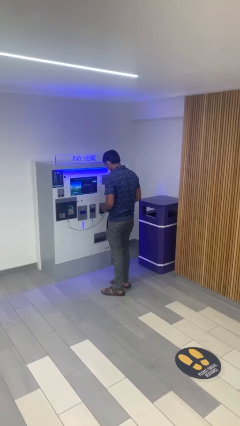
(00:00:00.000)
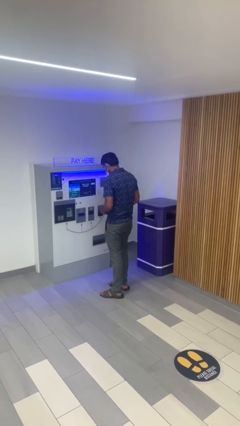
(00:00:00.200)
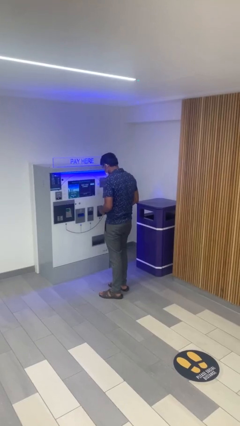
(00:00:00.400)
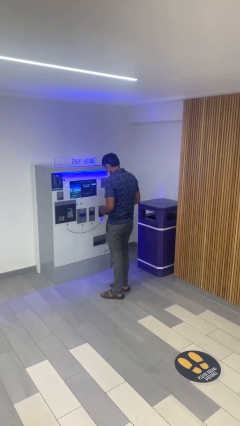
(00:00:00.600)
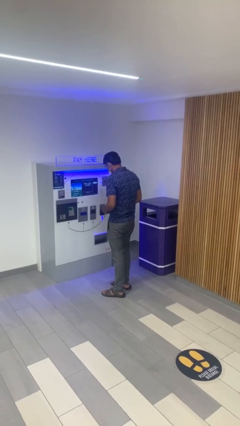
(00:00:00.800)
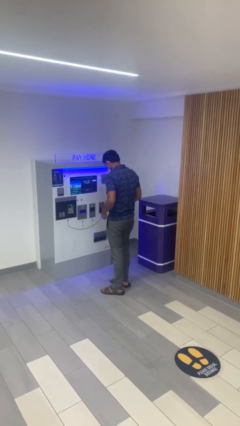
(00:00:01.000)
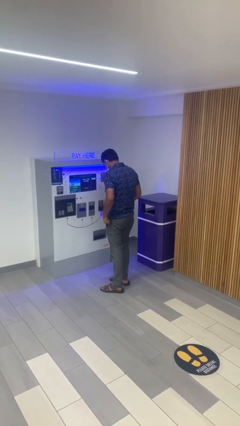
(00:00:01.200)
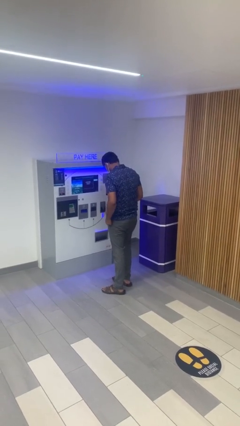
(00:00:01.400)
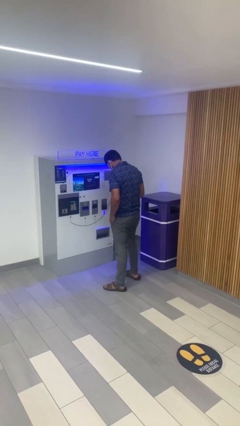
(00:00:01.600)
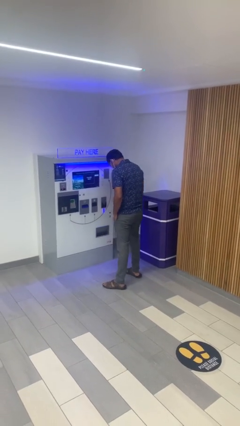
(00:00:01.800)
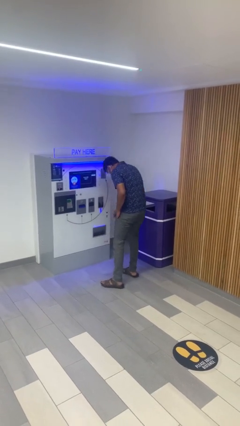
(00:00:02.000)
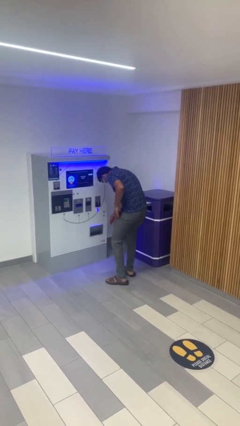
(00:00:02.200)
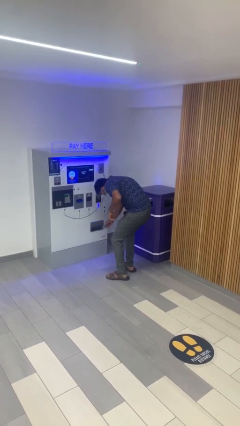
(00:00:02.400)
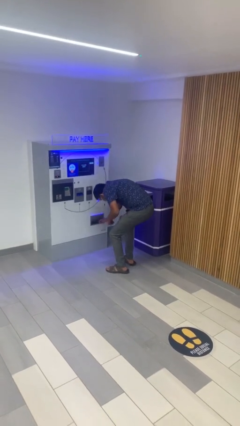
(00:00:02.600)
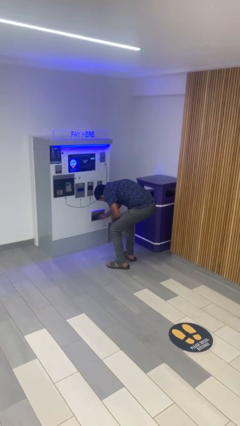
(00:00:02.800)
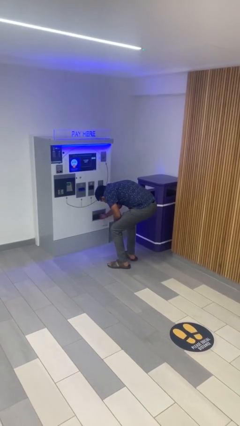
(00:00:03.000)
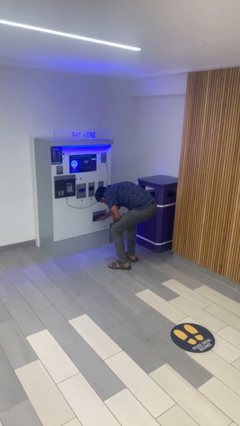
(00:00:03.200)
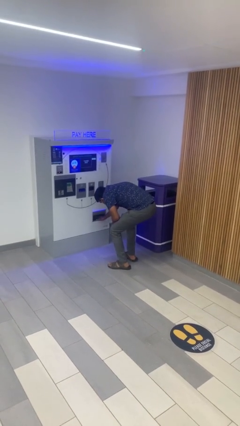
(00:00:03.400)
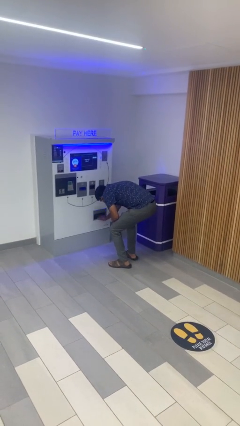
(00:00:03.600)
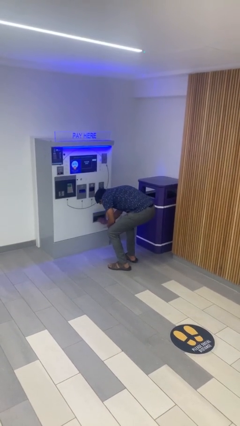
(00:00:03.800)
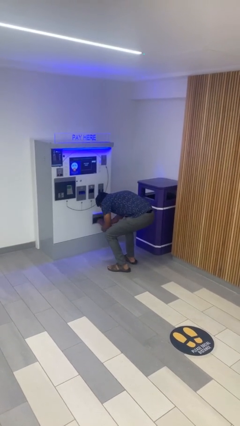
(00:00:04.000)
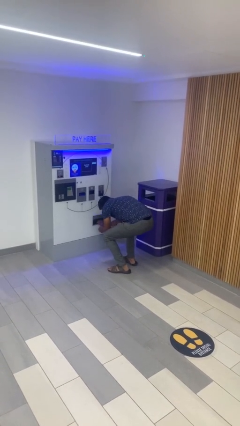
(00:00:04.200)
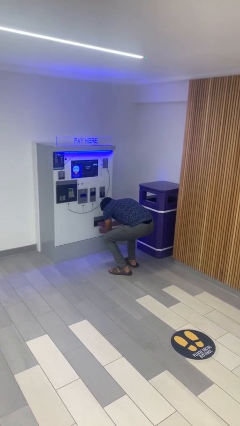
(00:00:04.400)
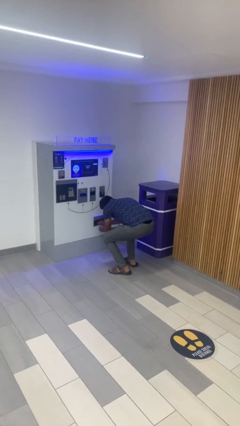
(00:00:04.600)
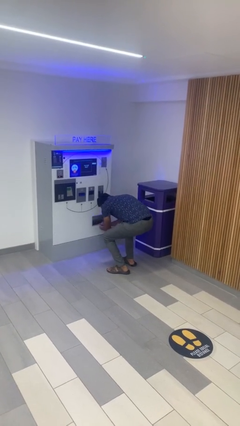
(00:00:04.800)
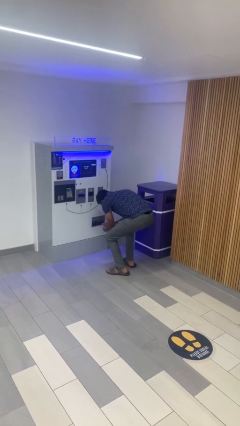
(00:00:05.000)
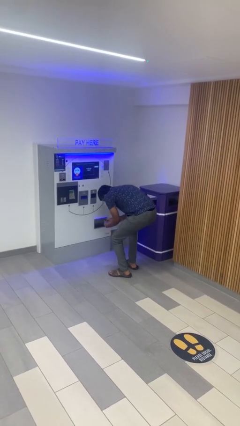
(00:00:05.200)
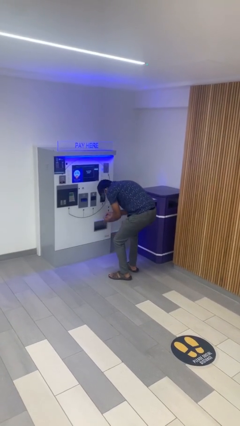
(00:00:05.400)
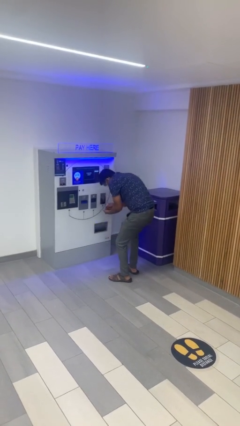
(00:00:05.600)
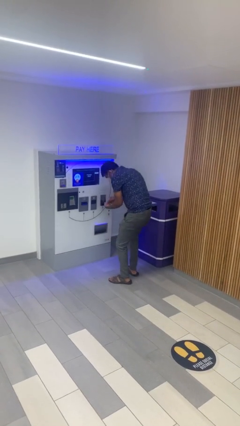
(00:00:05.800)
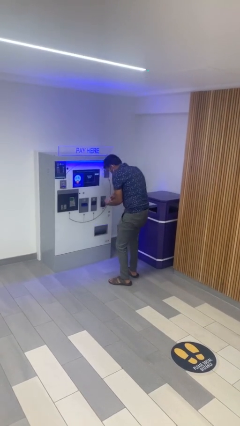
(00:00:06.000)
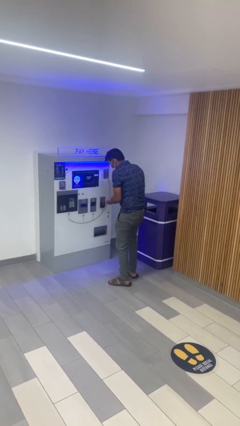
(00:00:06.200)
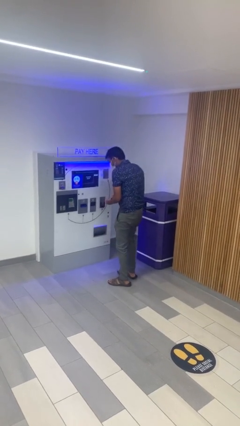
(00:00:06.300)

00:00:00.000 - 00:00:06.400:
person purchases from machine

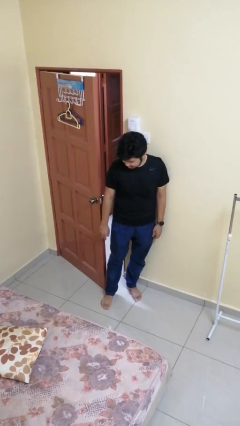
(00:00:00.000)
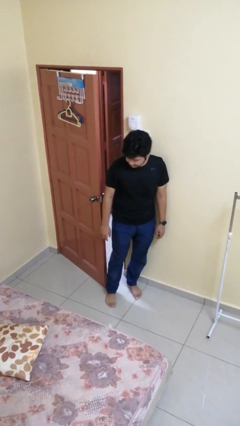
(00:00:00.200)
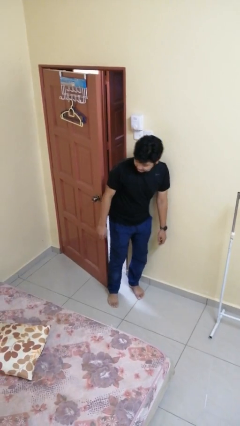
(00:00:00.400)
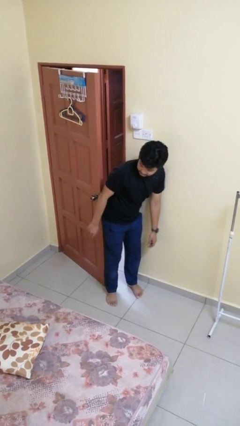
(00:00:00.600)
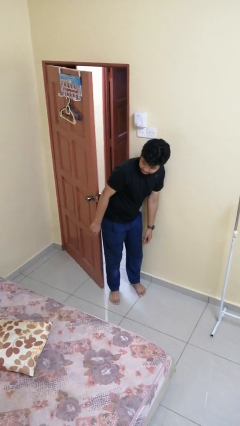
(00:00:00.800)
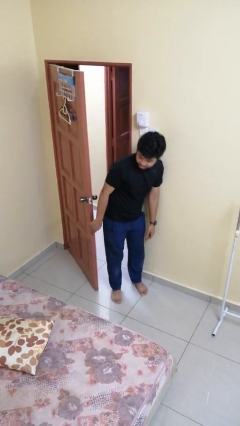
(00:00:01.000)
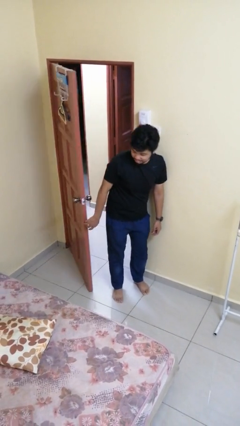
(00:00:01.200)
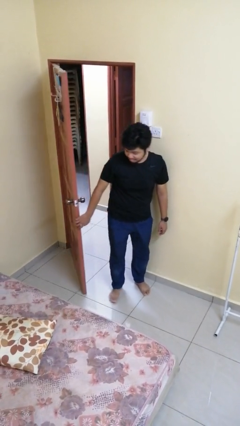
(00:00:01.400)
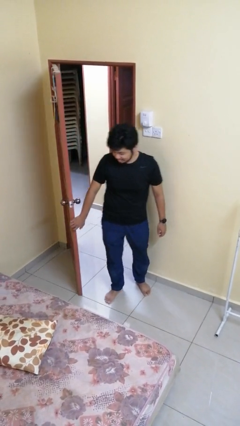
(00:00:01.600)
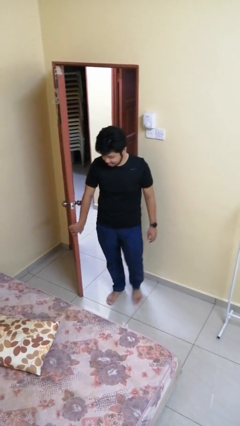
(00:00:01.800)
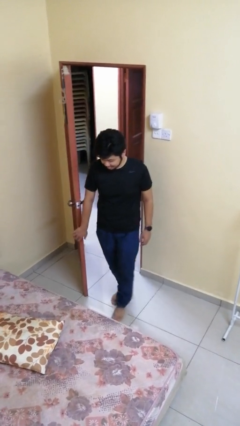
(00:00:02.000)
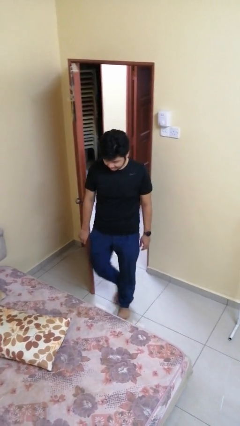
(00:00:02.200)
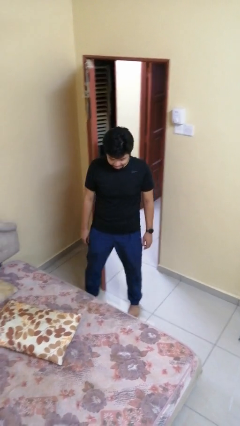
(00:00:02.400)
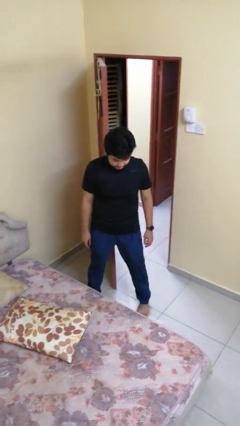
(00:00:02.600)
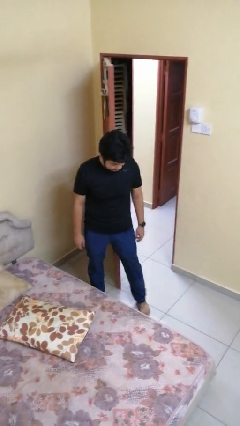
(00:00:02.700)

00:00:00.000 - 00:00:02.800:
person opens facility door

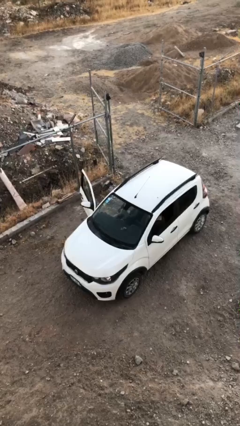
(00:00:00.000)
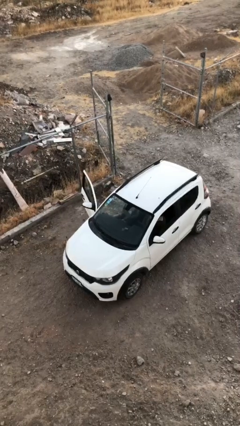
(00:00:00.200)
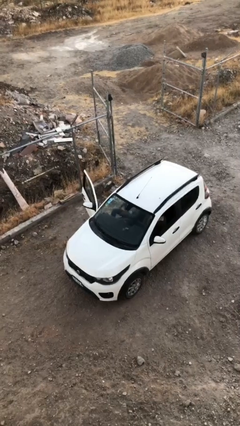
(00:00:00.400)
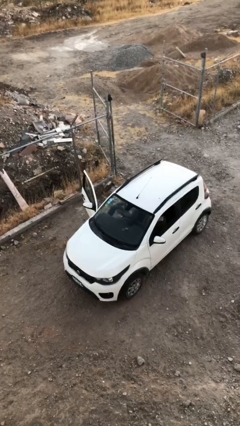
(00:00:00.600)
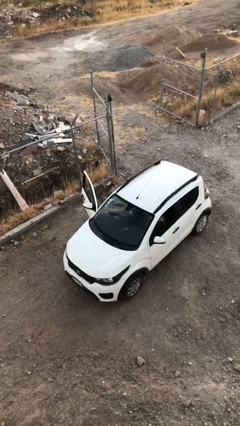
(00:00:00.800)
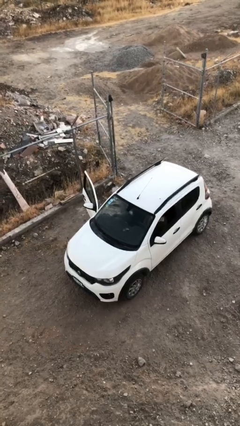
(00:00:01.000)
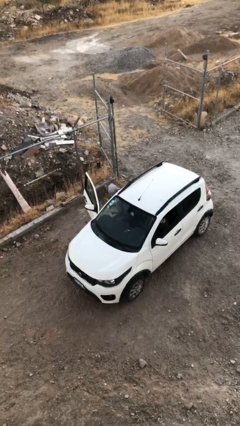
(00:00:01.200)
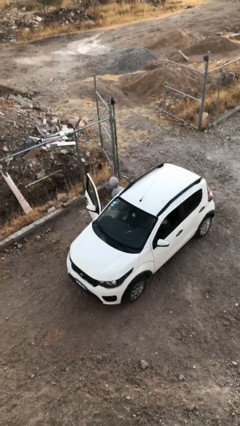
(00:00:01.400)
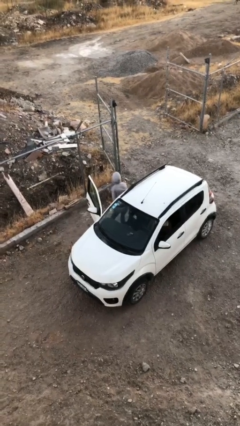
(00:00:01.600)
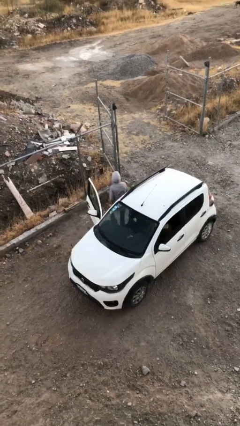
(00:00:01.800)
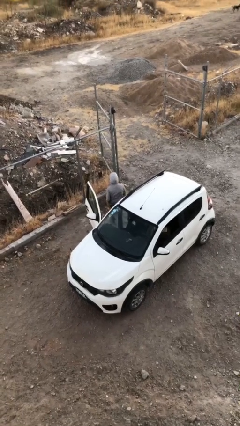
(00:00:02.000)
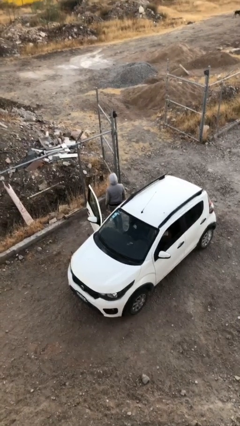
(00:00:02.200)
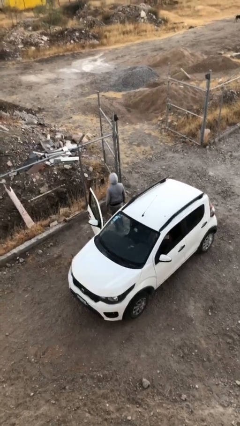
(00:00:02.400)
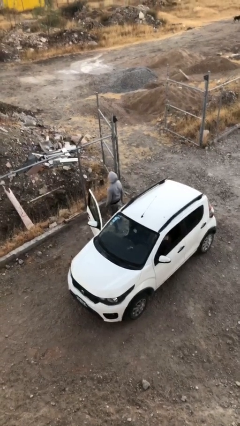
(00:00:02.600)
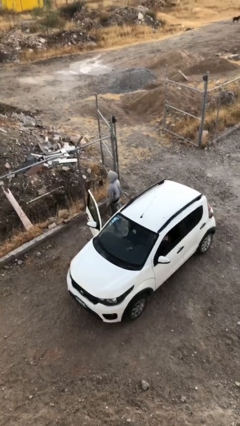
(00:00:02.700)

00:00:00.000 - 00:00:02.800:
person exits car

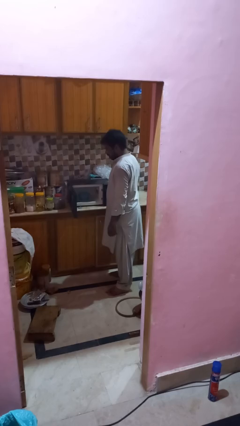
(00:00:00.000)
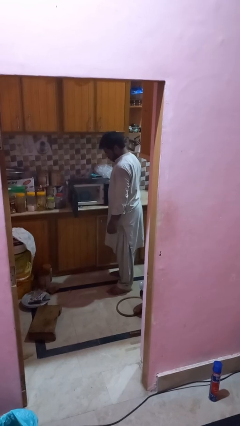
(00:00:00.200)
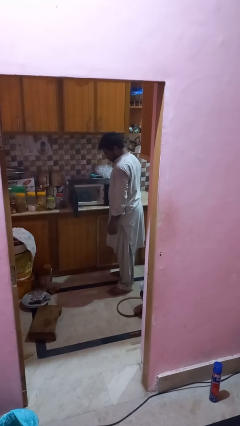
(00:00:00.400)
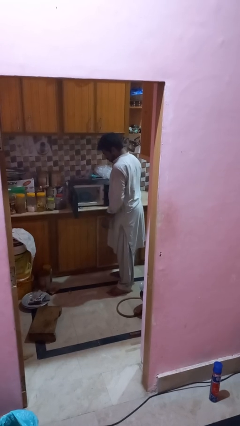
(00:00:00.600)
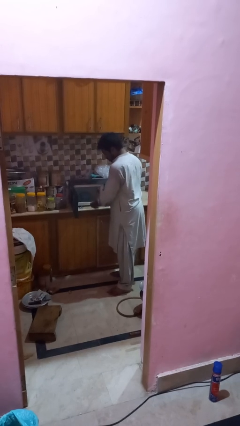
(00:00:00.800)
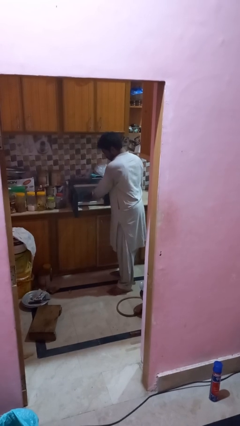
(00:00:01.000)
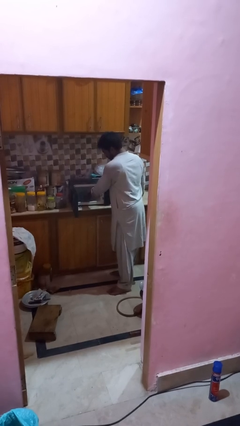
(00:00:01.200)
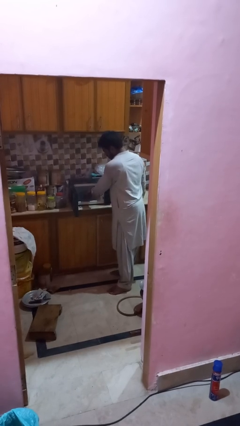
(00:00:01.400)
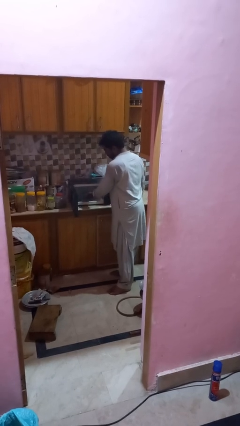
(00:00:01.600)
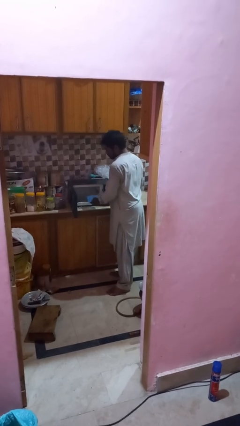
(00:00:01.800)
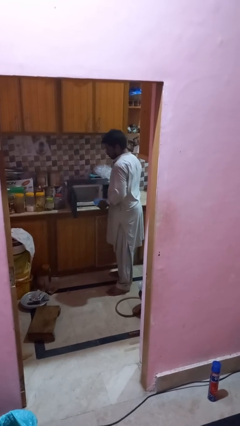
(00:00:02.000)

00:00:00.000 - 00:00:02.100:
person takes object from microwave

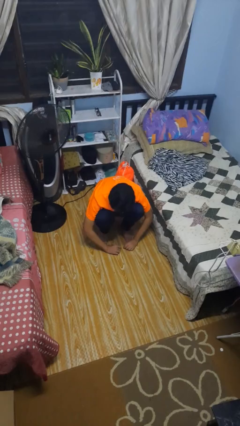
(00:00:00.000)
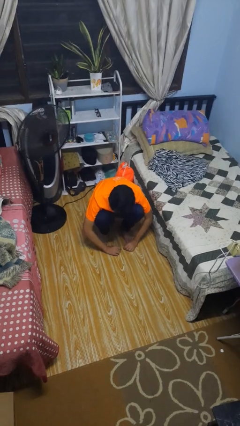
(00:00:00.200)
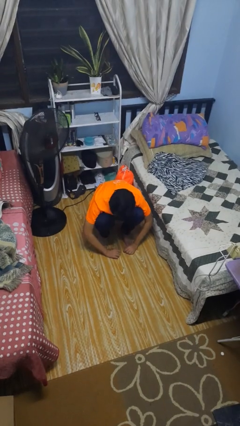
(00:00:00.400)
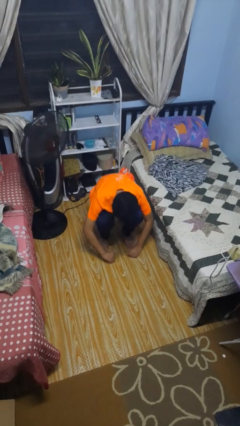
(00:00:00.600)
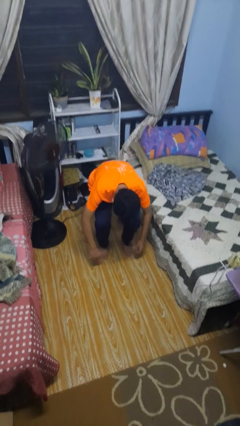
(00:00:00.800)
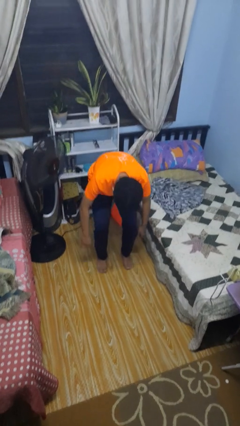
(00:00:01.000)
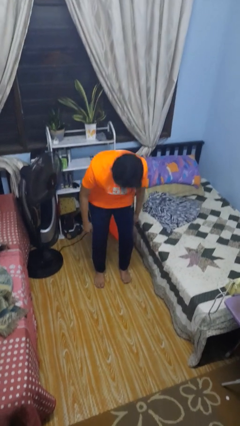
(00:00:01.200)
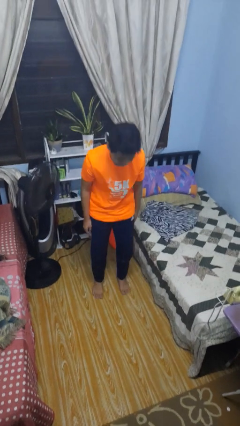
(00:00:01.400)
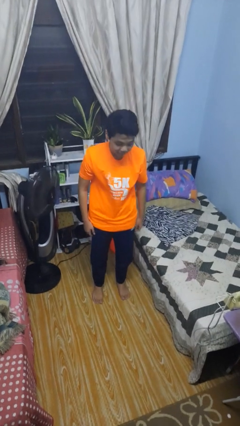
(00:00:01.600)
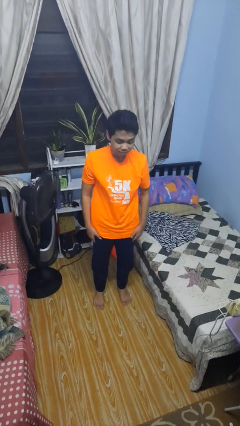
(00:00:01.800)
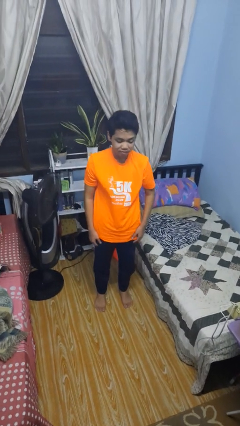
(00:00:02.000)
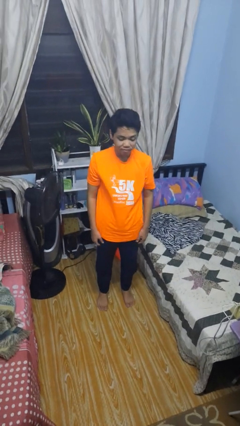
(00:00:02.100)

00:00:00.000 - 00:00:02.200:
person stands up

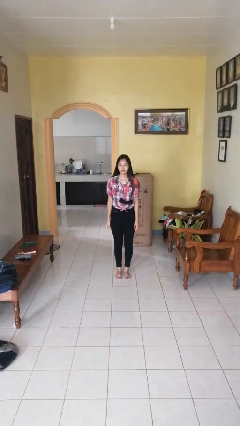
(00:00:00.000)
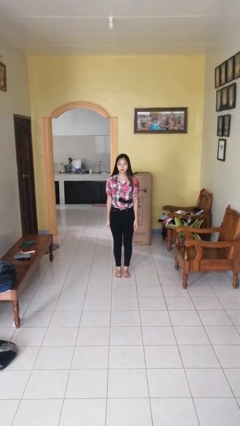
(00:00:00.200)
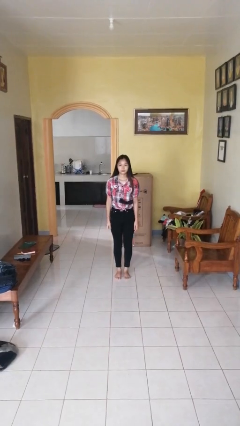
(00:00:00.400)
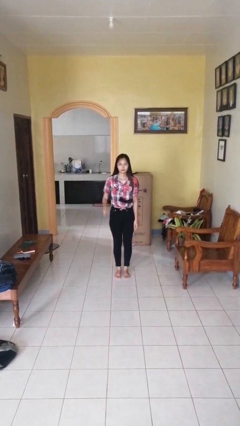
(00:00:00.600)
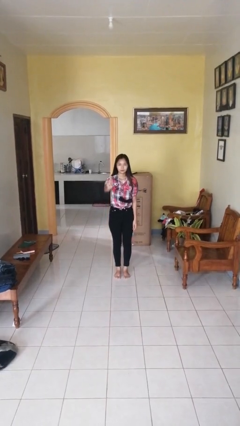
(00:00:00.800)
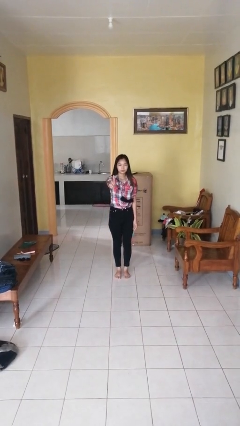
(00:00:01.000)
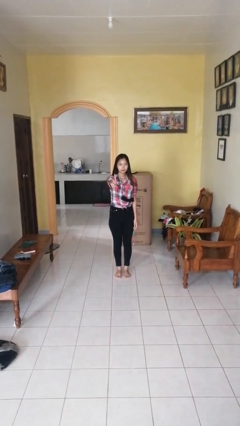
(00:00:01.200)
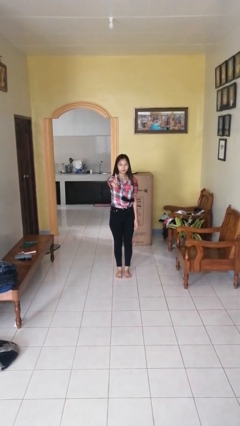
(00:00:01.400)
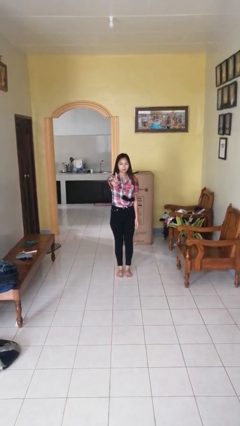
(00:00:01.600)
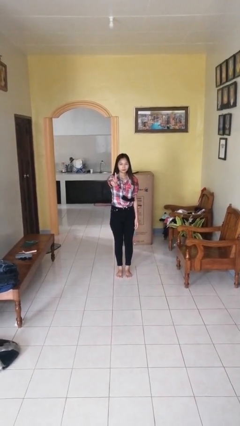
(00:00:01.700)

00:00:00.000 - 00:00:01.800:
person gestures number one
